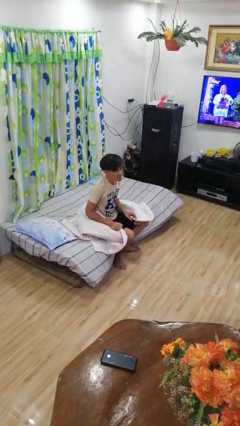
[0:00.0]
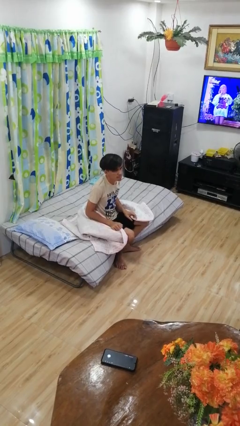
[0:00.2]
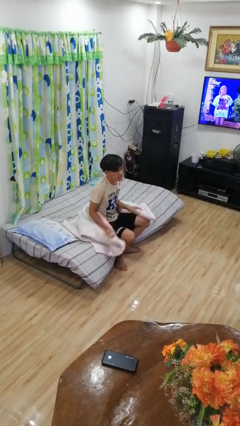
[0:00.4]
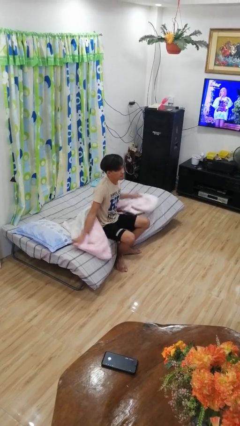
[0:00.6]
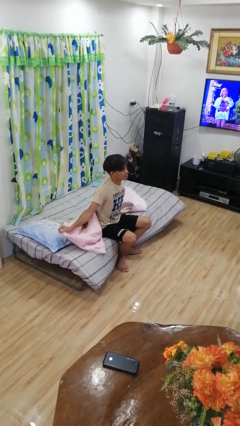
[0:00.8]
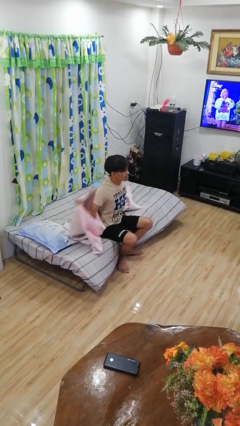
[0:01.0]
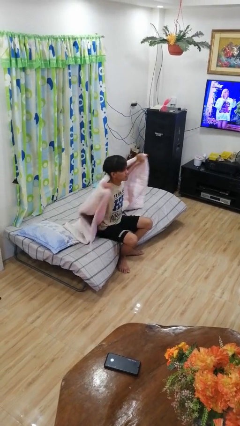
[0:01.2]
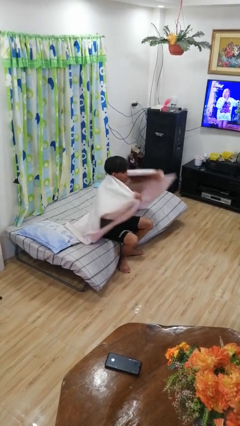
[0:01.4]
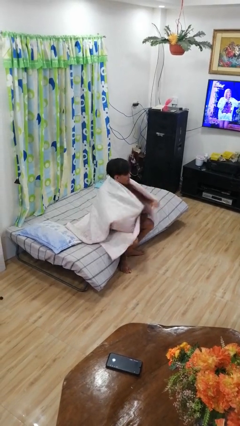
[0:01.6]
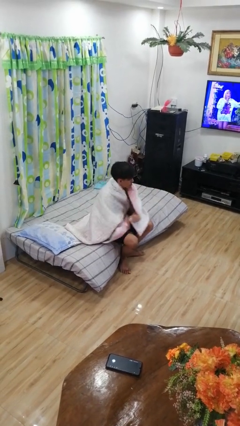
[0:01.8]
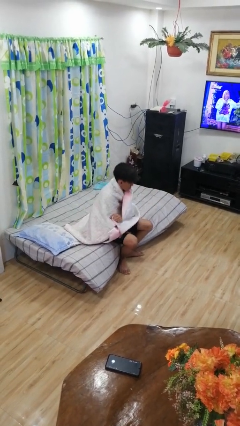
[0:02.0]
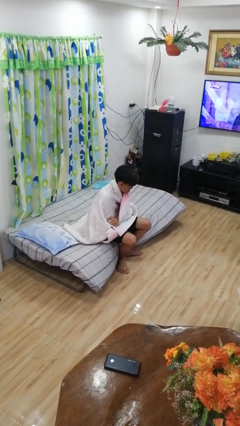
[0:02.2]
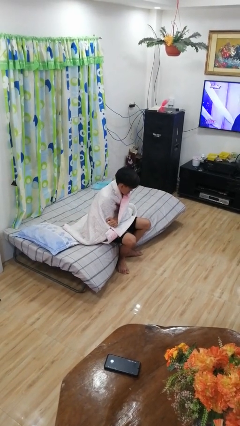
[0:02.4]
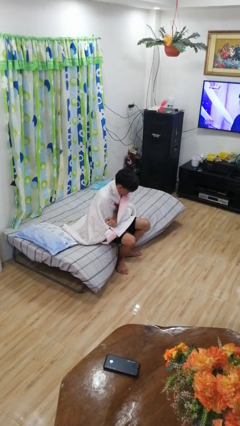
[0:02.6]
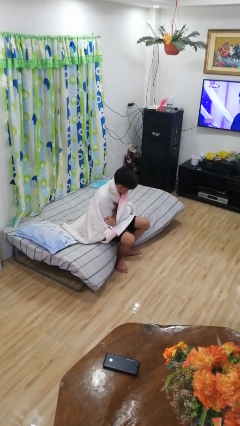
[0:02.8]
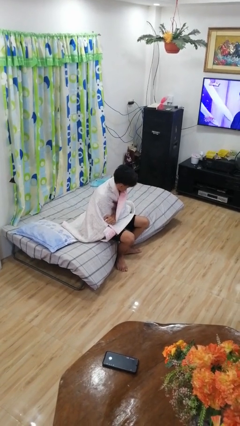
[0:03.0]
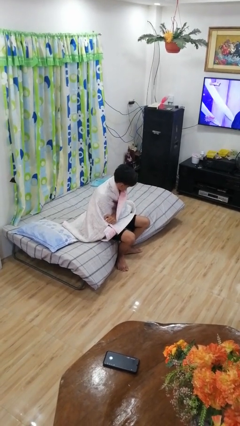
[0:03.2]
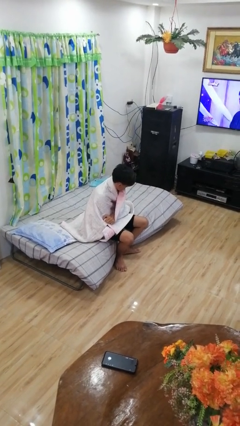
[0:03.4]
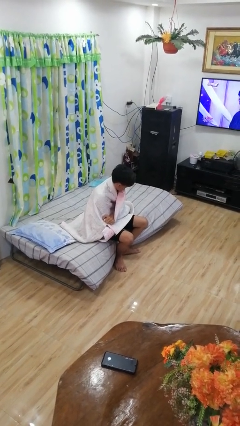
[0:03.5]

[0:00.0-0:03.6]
person covers with bedsheets

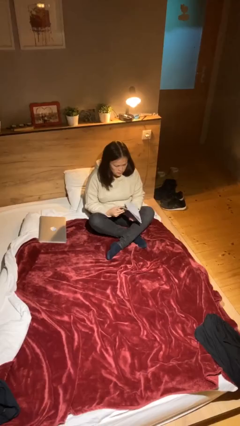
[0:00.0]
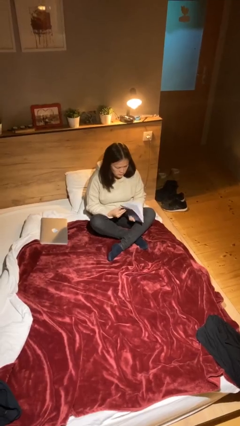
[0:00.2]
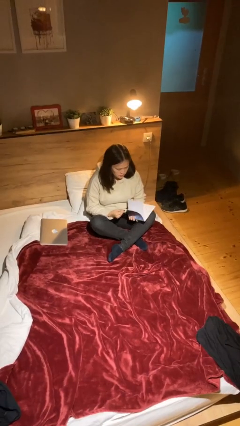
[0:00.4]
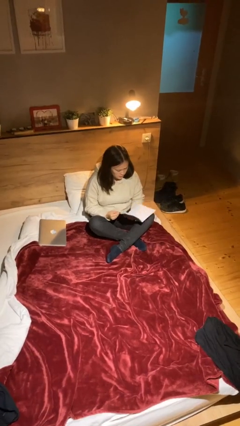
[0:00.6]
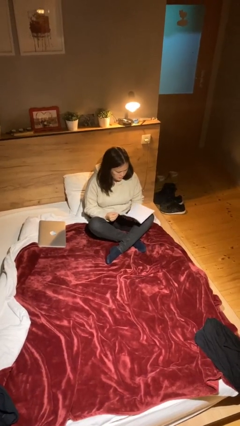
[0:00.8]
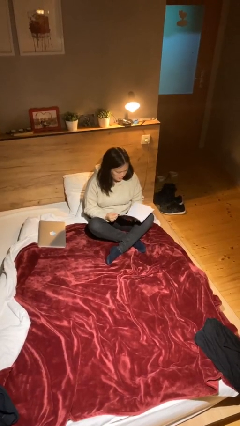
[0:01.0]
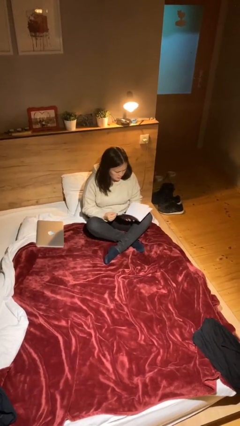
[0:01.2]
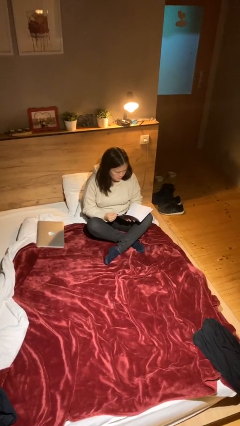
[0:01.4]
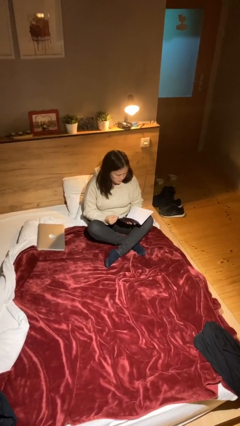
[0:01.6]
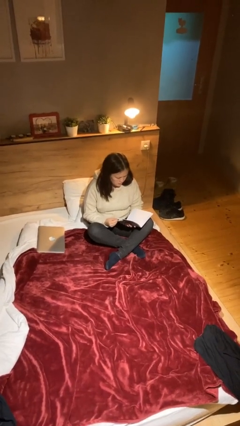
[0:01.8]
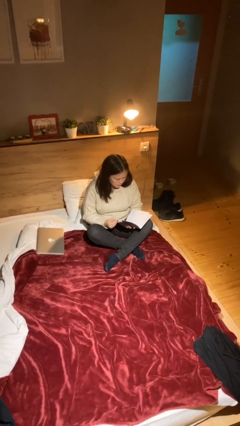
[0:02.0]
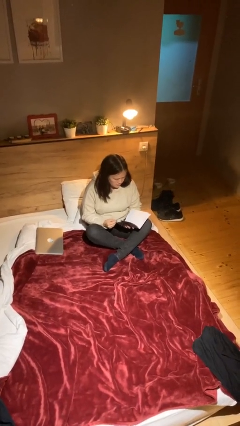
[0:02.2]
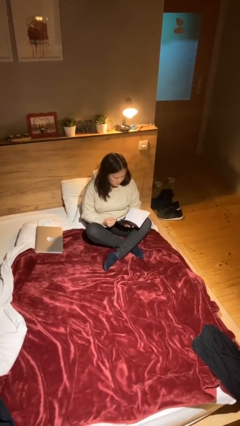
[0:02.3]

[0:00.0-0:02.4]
person reads document

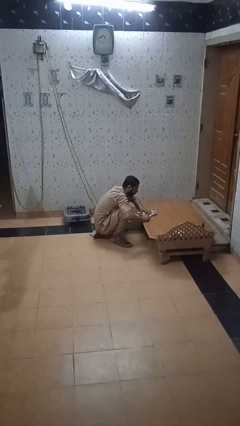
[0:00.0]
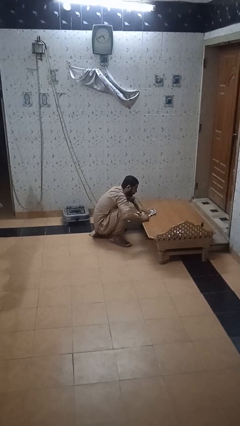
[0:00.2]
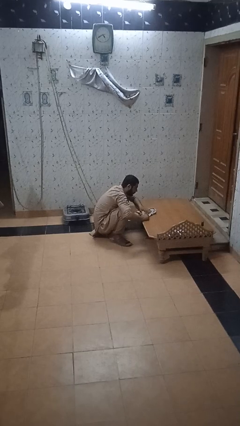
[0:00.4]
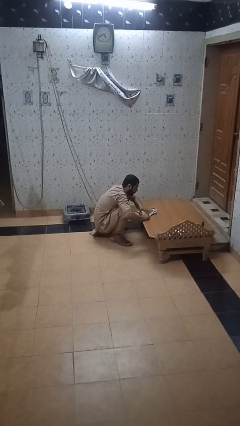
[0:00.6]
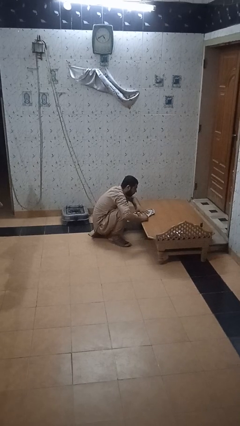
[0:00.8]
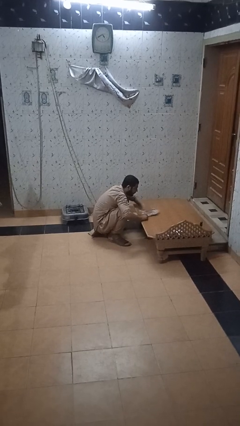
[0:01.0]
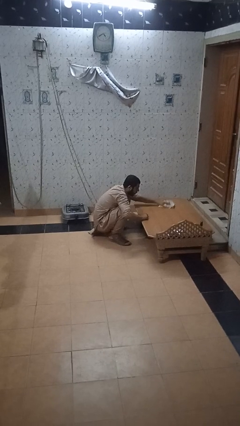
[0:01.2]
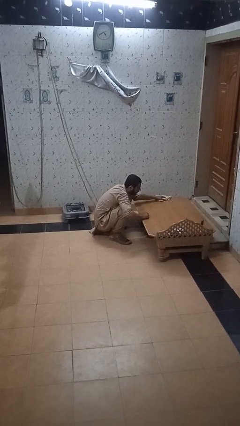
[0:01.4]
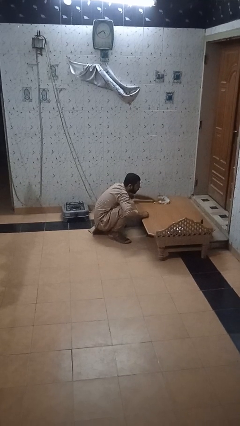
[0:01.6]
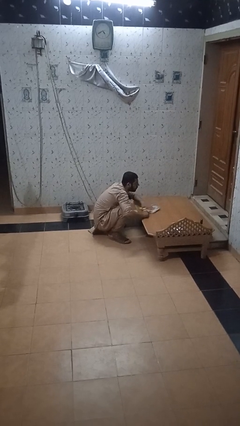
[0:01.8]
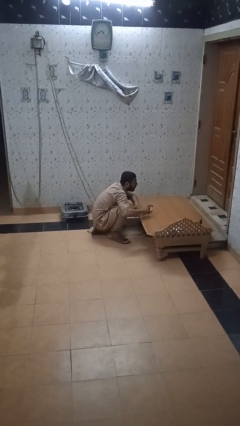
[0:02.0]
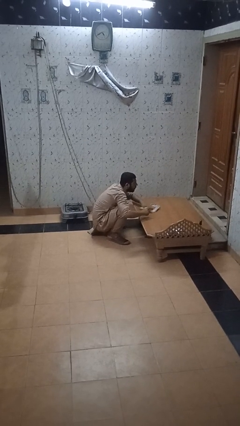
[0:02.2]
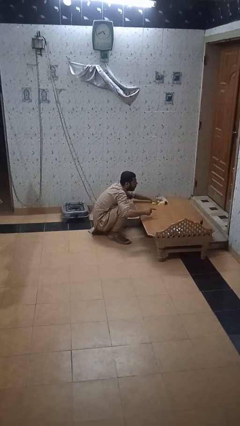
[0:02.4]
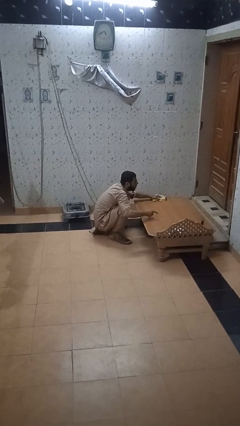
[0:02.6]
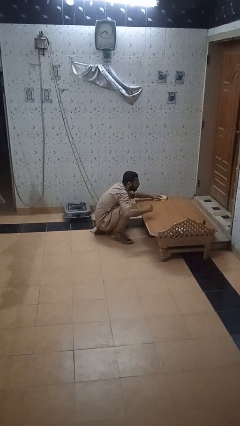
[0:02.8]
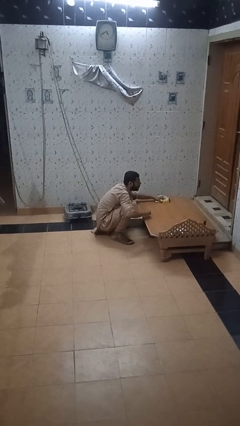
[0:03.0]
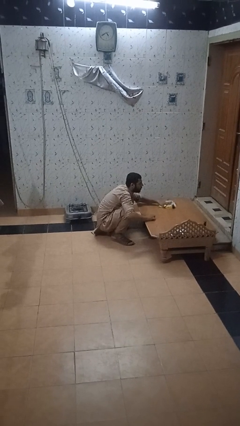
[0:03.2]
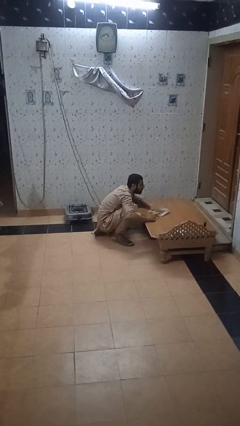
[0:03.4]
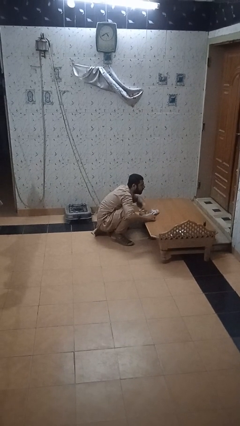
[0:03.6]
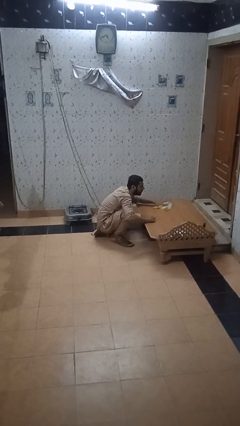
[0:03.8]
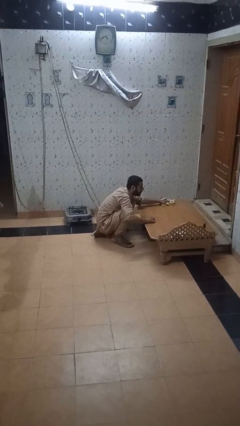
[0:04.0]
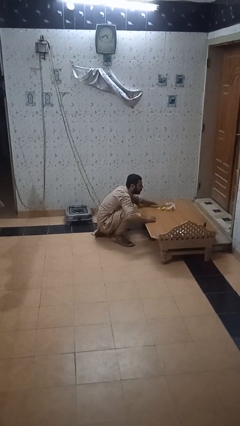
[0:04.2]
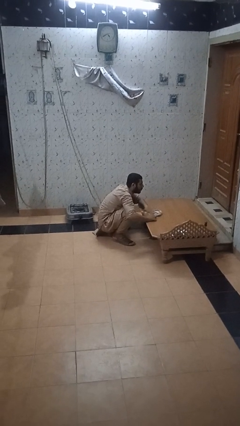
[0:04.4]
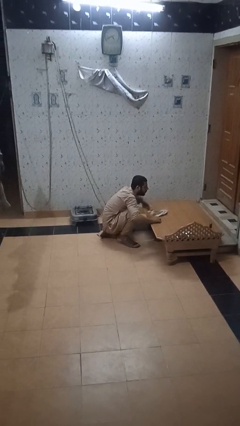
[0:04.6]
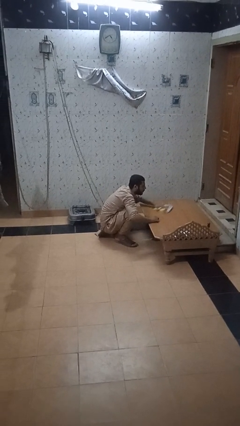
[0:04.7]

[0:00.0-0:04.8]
person cleans table with rag

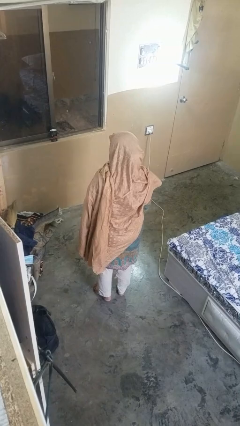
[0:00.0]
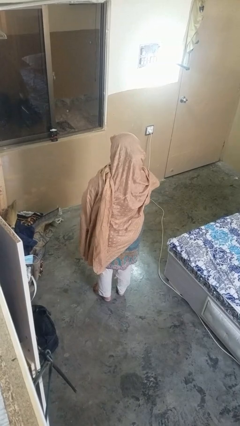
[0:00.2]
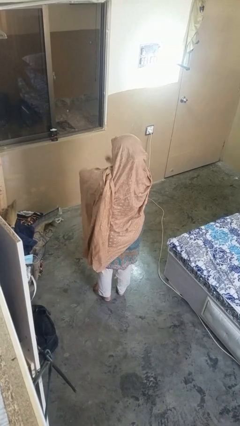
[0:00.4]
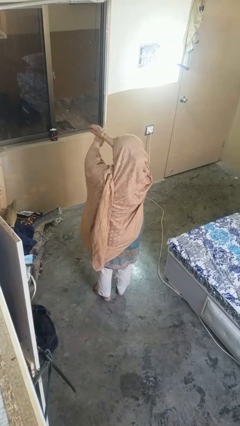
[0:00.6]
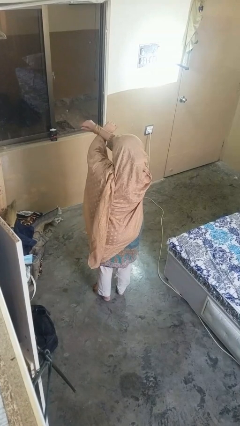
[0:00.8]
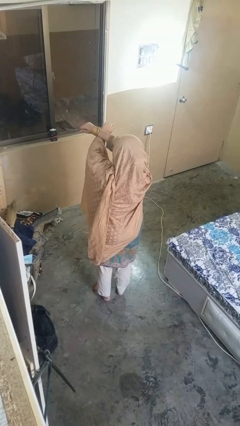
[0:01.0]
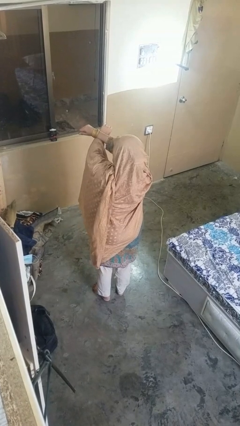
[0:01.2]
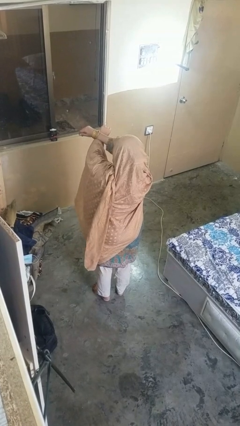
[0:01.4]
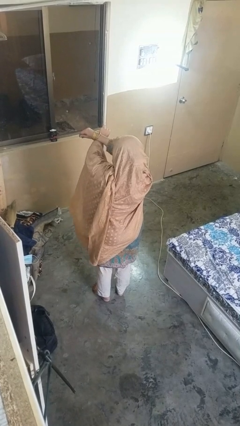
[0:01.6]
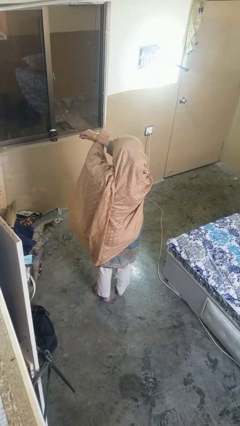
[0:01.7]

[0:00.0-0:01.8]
person crosses arms

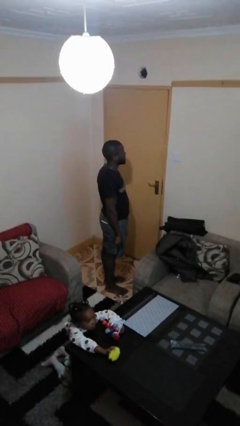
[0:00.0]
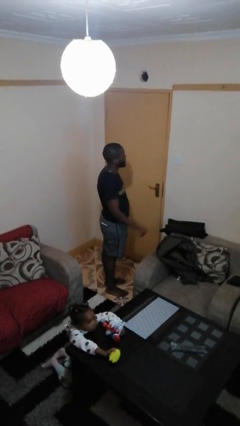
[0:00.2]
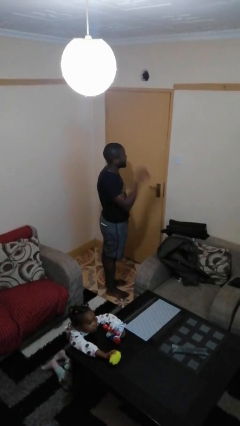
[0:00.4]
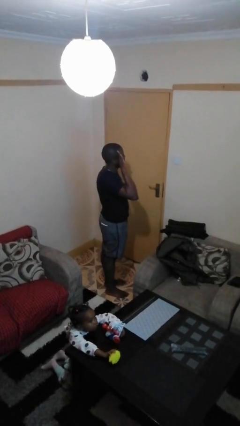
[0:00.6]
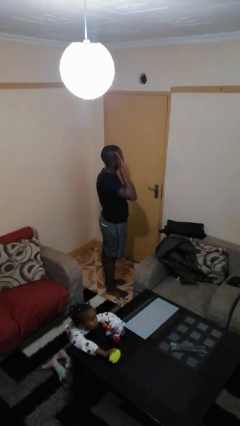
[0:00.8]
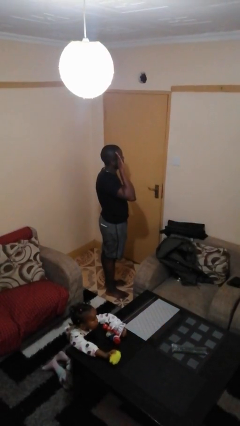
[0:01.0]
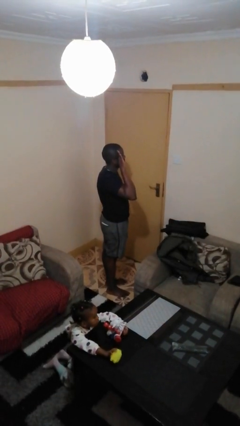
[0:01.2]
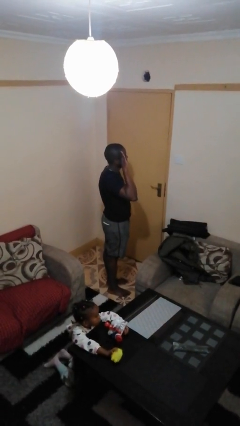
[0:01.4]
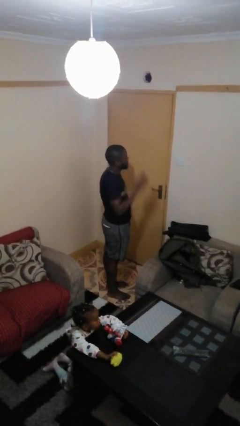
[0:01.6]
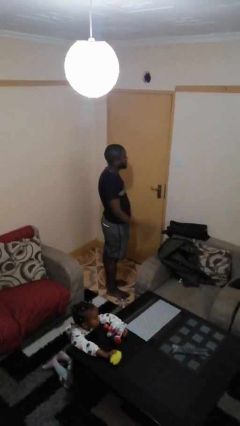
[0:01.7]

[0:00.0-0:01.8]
person salutes

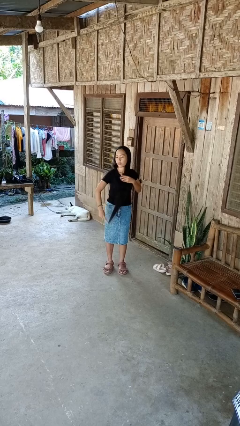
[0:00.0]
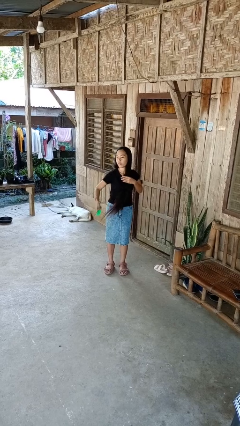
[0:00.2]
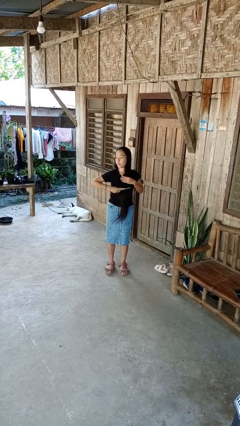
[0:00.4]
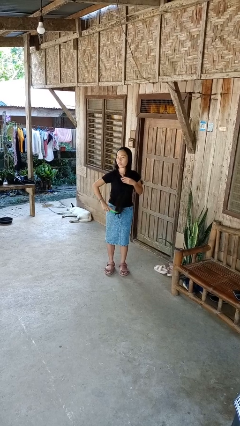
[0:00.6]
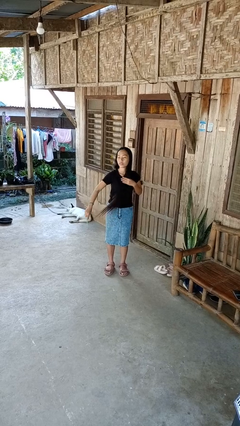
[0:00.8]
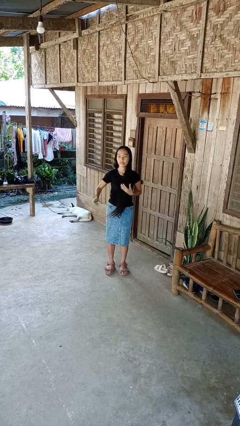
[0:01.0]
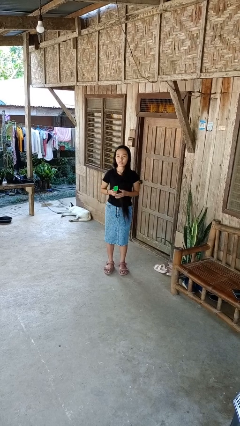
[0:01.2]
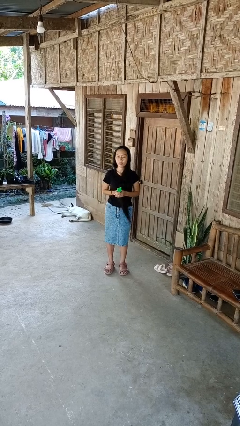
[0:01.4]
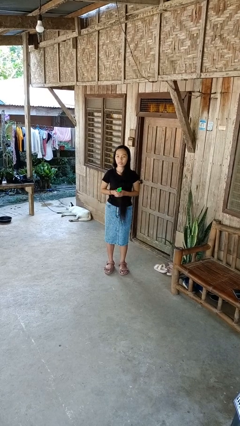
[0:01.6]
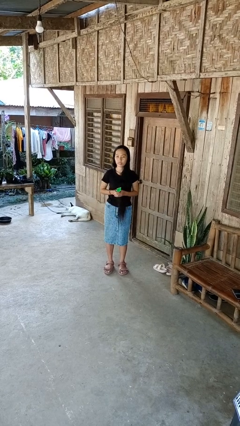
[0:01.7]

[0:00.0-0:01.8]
person brushes hair

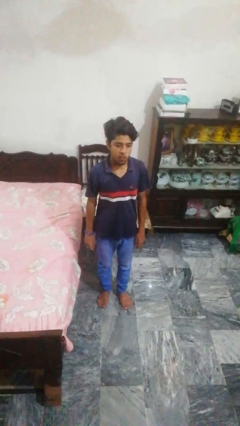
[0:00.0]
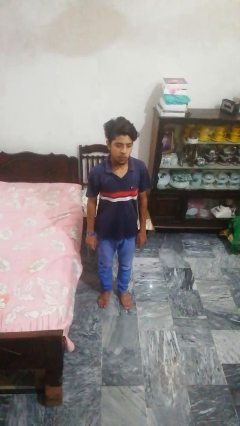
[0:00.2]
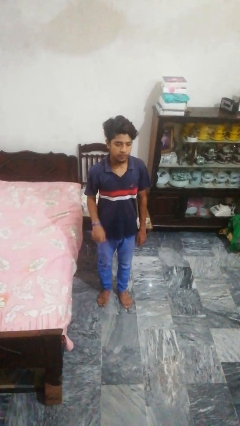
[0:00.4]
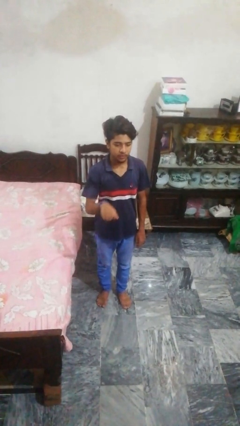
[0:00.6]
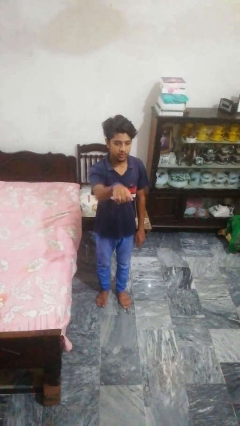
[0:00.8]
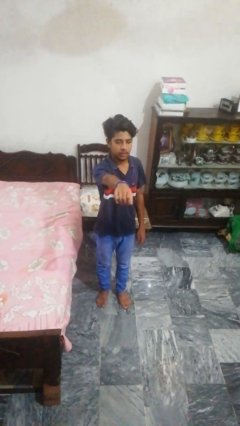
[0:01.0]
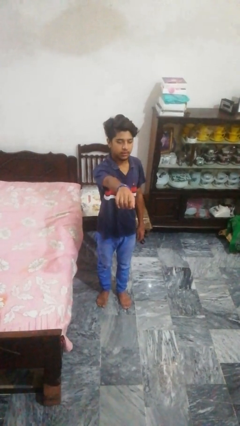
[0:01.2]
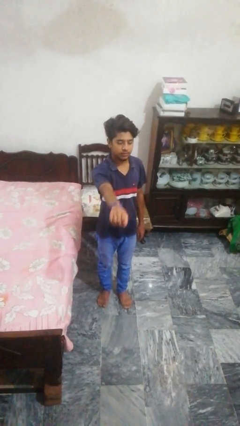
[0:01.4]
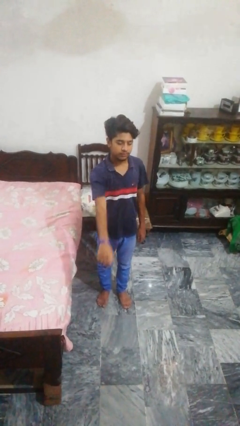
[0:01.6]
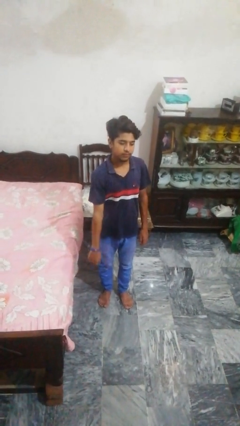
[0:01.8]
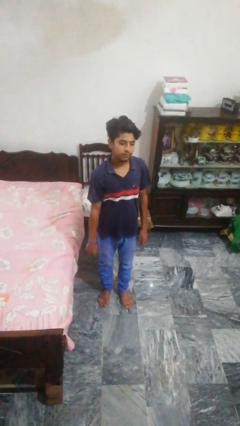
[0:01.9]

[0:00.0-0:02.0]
person punches
